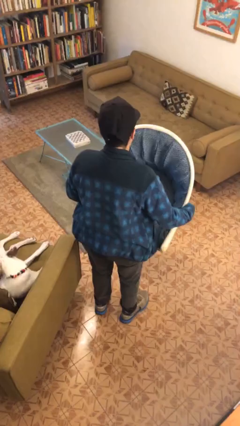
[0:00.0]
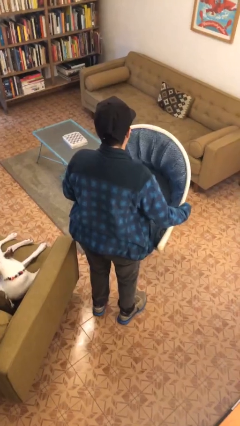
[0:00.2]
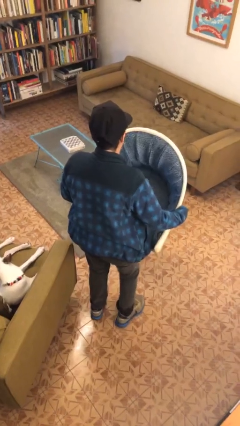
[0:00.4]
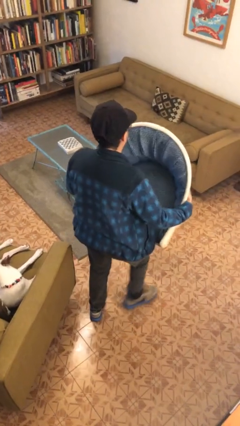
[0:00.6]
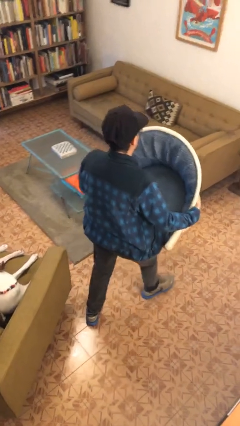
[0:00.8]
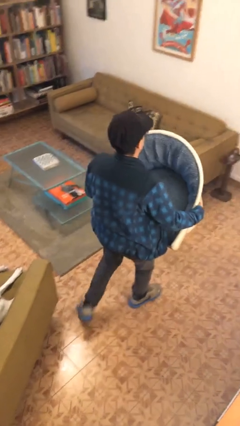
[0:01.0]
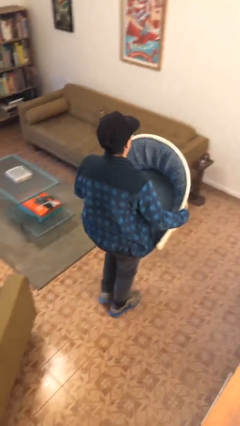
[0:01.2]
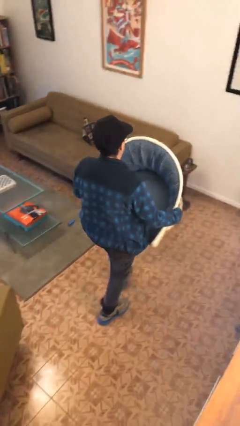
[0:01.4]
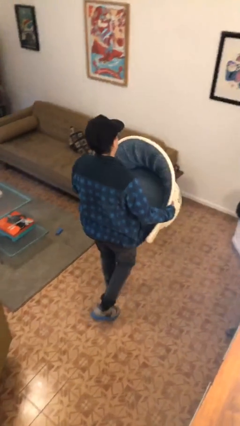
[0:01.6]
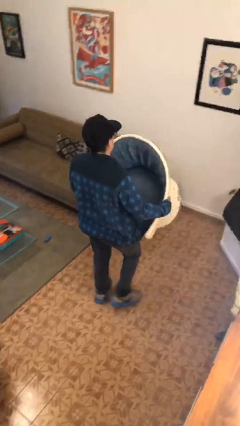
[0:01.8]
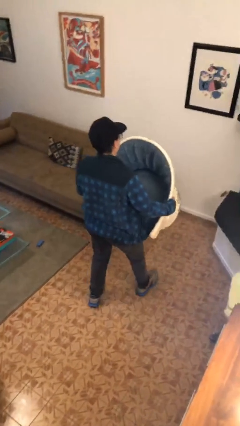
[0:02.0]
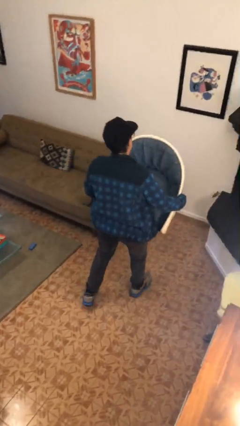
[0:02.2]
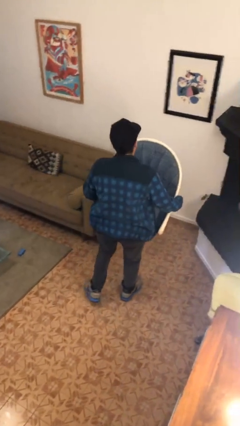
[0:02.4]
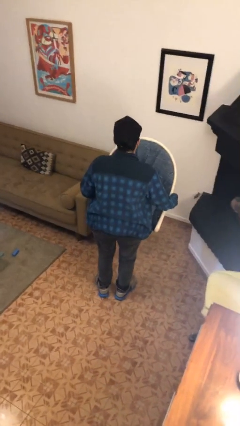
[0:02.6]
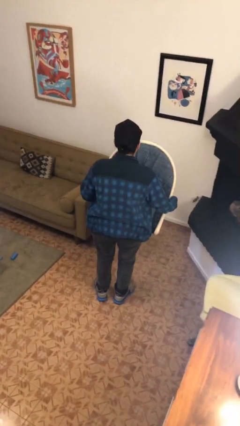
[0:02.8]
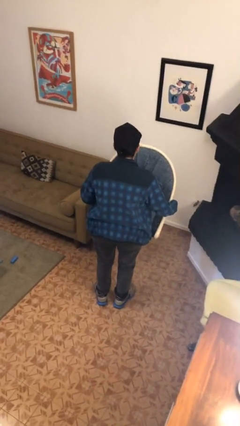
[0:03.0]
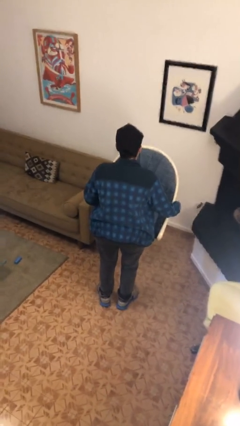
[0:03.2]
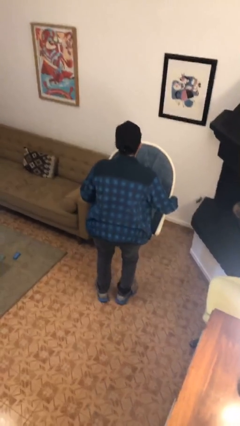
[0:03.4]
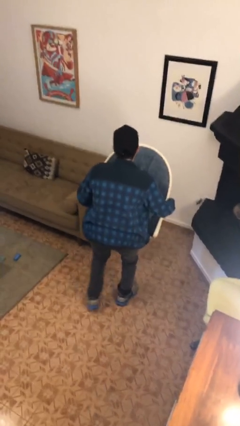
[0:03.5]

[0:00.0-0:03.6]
person carries furniture

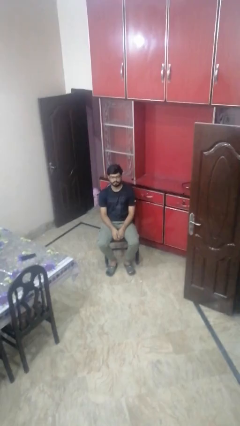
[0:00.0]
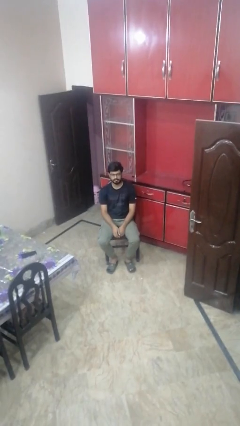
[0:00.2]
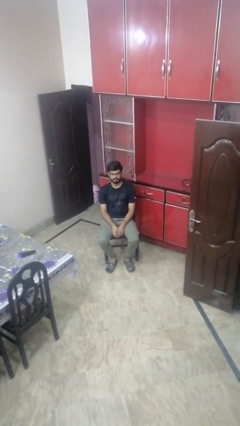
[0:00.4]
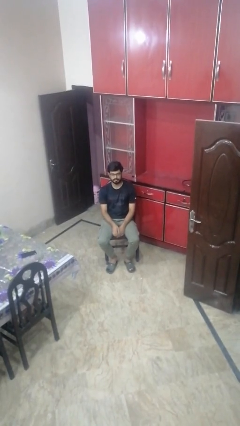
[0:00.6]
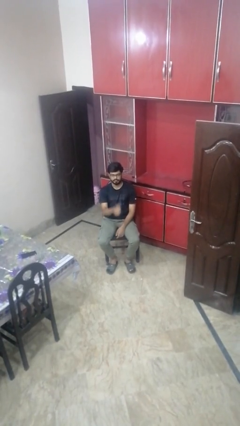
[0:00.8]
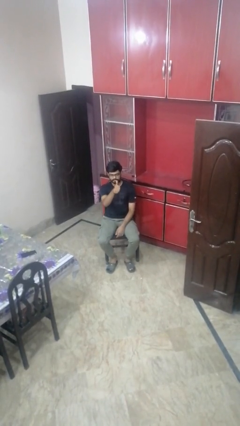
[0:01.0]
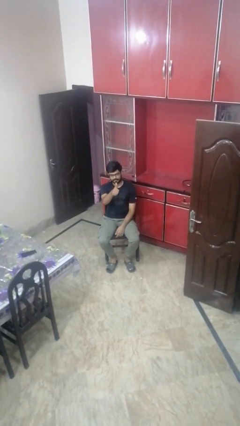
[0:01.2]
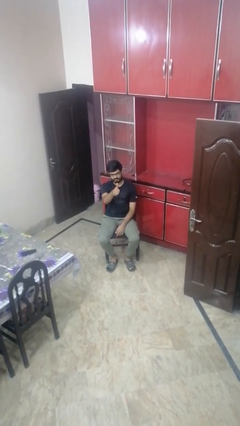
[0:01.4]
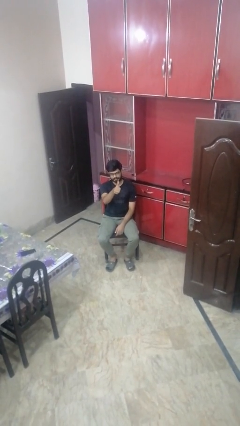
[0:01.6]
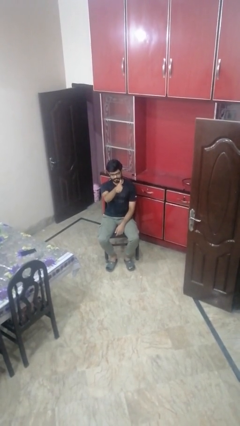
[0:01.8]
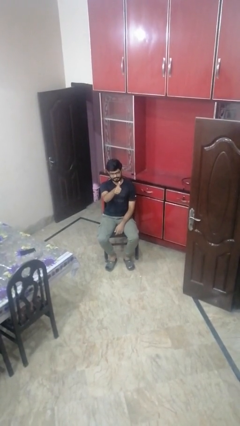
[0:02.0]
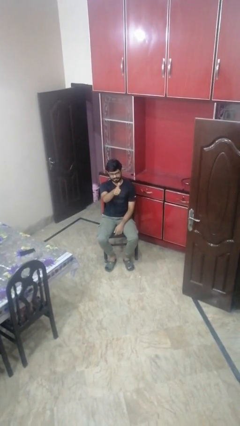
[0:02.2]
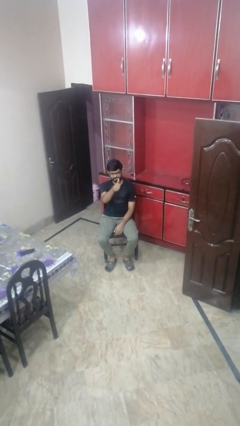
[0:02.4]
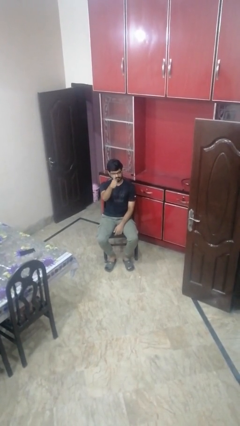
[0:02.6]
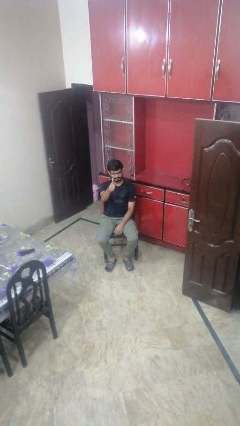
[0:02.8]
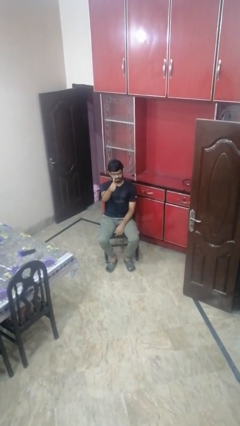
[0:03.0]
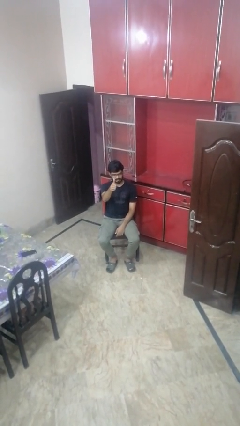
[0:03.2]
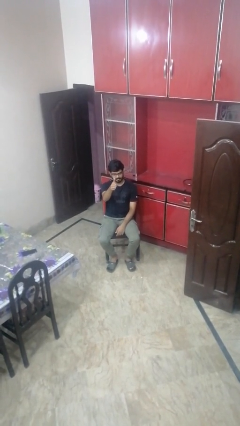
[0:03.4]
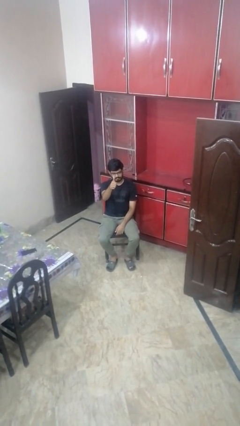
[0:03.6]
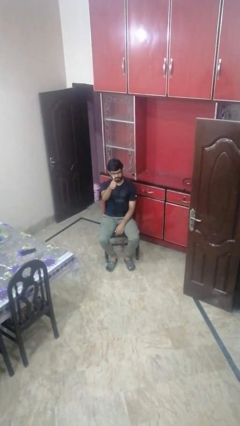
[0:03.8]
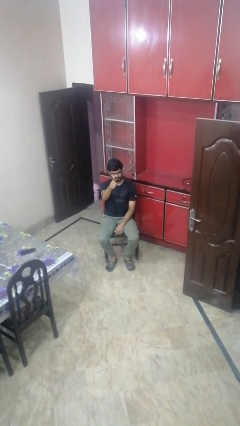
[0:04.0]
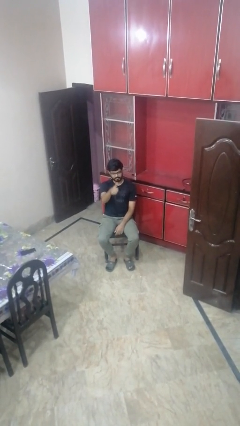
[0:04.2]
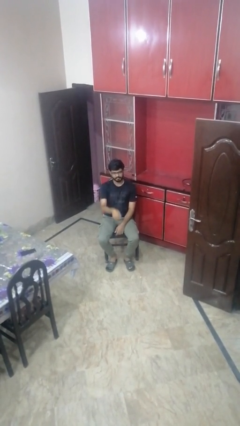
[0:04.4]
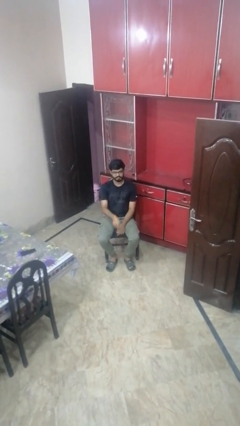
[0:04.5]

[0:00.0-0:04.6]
person gestures thumbs up

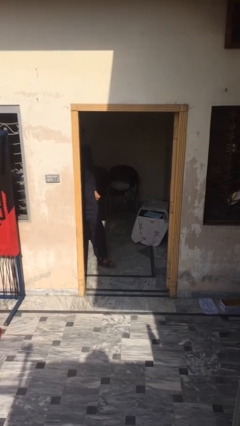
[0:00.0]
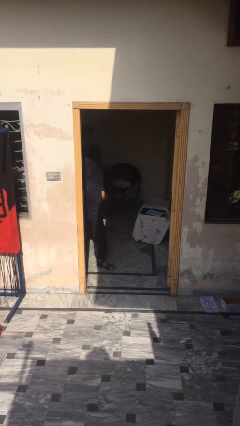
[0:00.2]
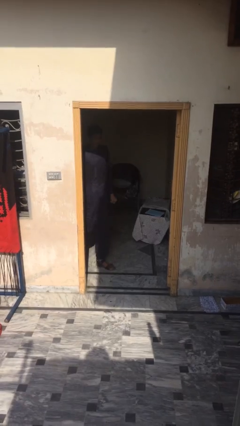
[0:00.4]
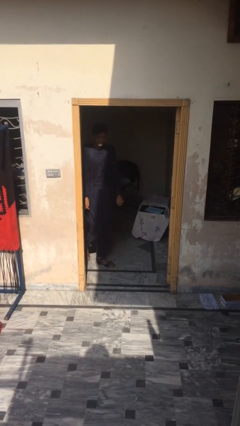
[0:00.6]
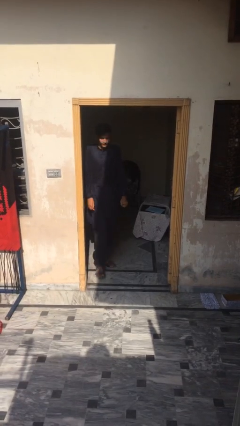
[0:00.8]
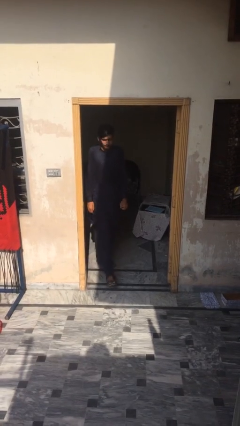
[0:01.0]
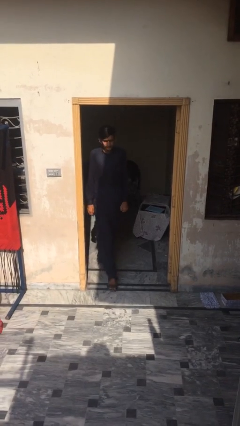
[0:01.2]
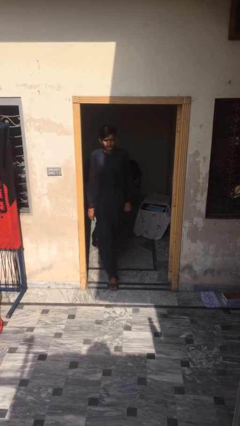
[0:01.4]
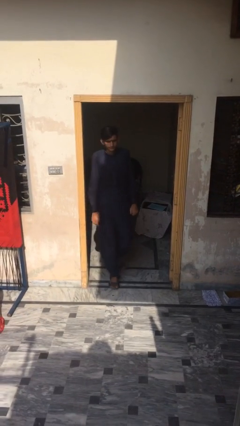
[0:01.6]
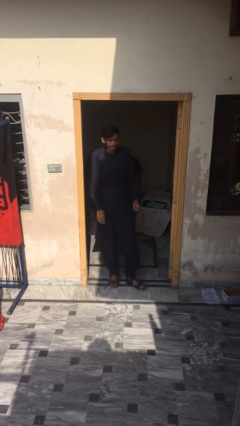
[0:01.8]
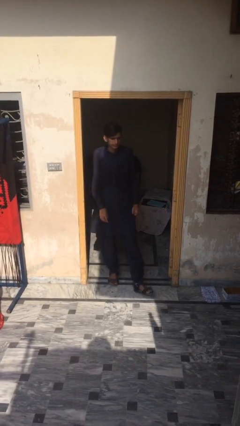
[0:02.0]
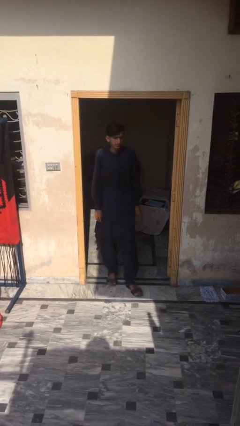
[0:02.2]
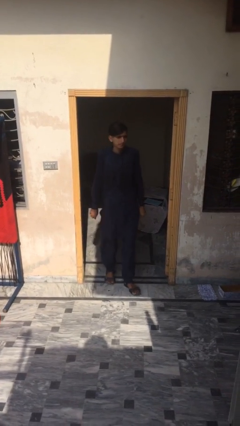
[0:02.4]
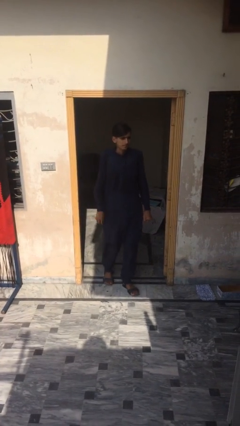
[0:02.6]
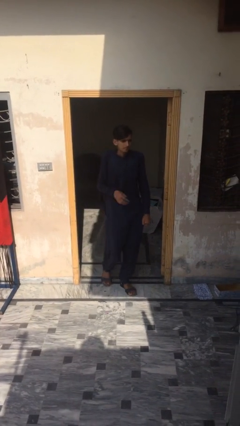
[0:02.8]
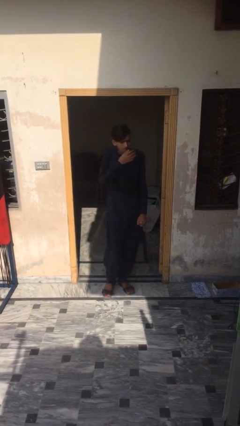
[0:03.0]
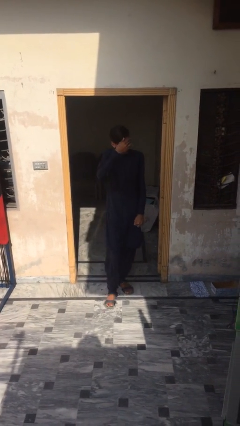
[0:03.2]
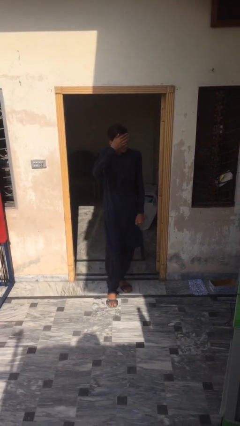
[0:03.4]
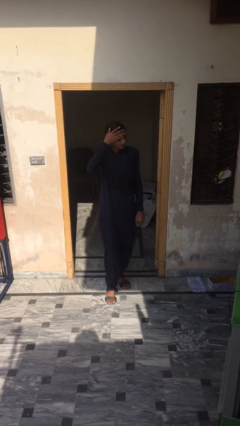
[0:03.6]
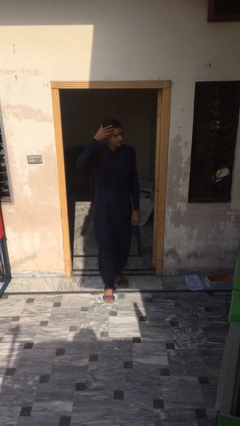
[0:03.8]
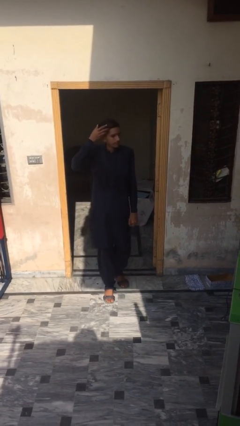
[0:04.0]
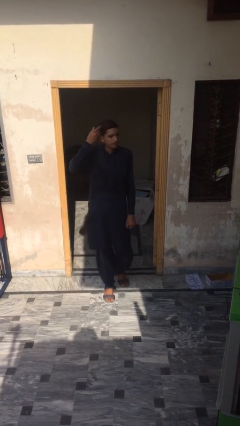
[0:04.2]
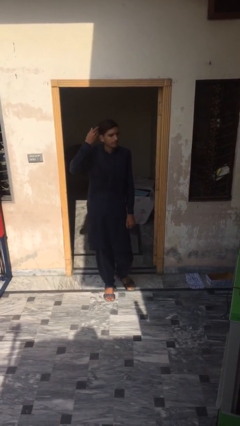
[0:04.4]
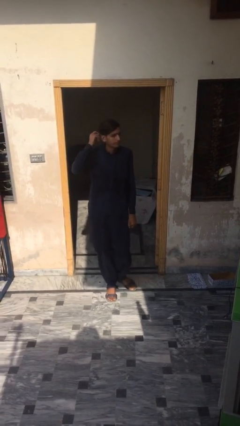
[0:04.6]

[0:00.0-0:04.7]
person enters scene through structure

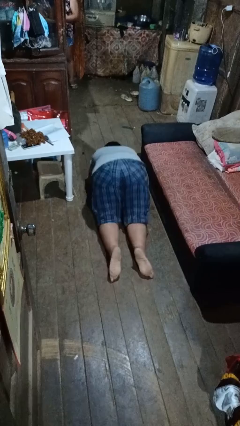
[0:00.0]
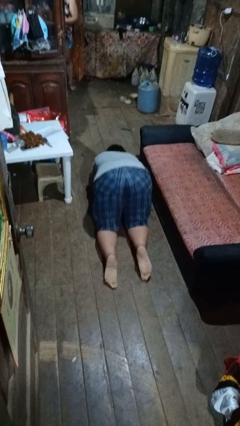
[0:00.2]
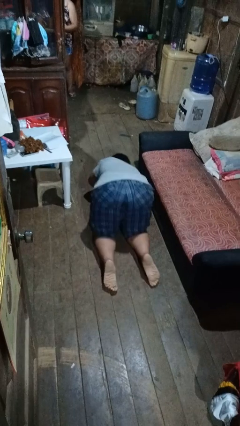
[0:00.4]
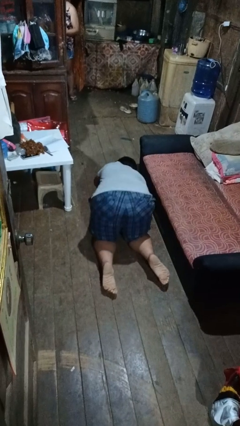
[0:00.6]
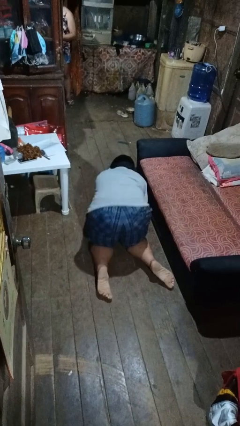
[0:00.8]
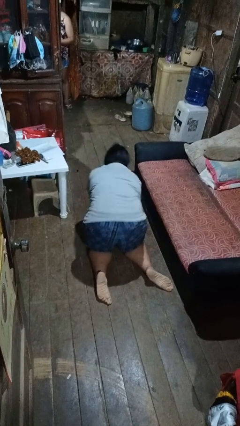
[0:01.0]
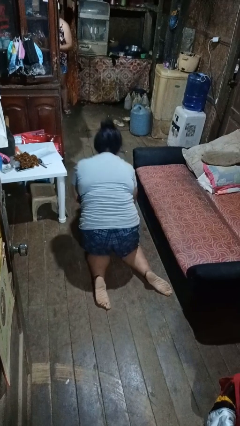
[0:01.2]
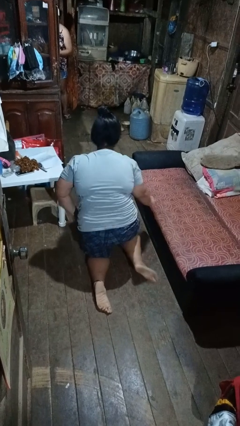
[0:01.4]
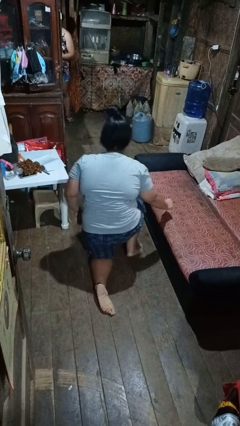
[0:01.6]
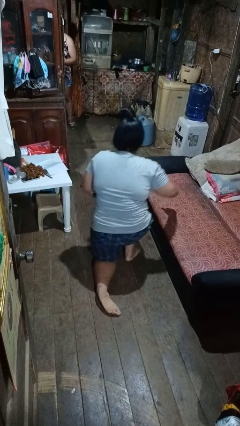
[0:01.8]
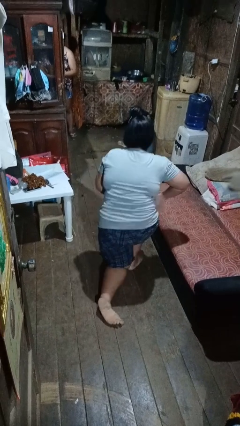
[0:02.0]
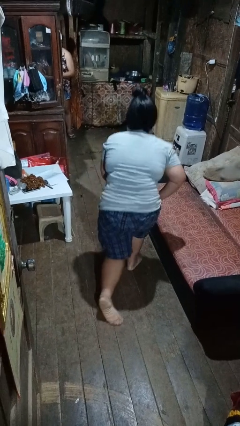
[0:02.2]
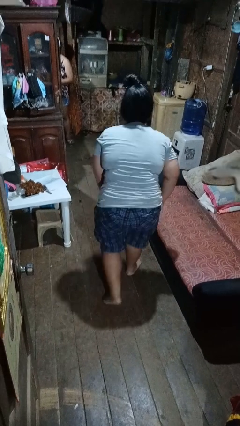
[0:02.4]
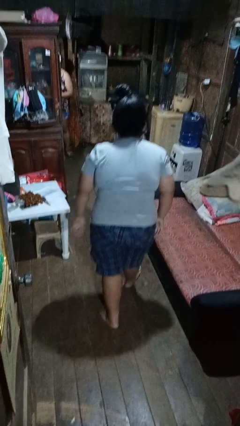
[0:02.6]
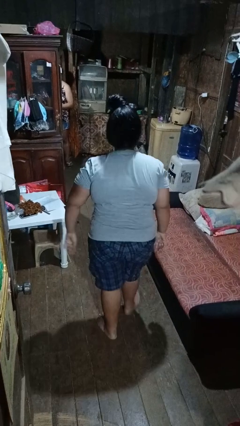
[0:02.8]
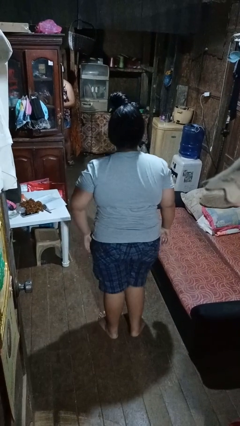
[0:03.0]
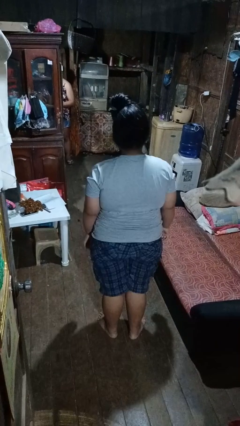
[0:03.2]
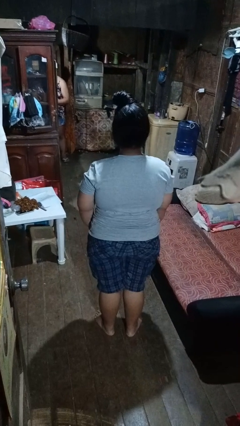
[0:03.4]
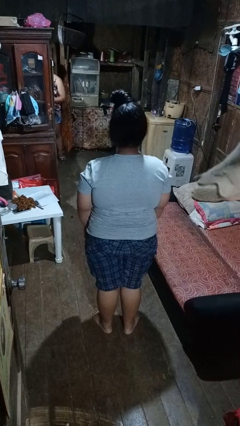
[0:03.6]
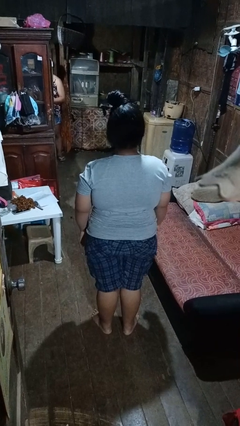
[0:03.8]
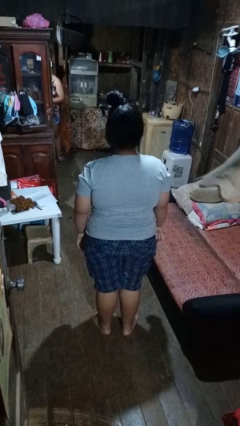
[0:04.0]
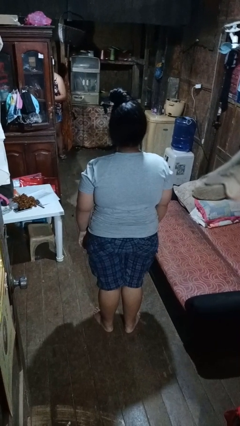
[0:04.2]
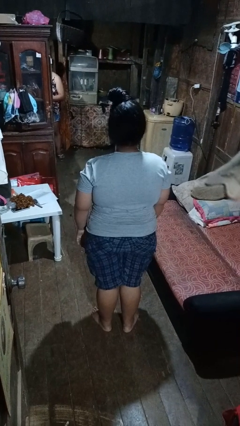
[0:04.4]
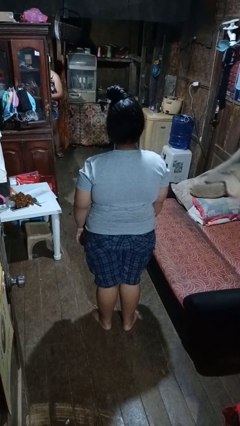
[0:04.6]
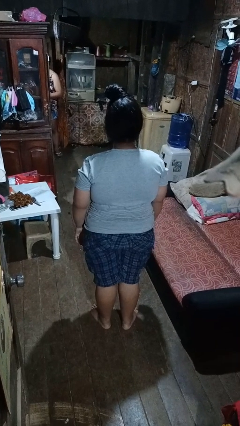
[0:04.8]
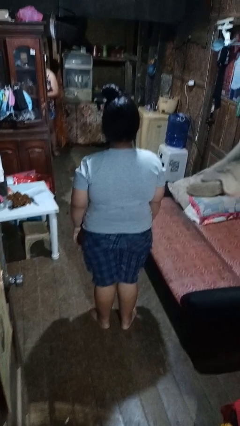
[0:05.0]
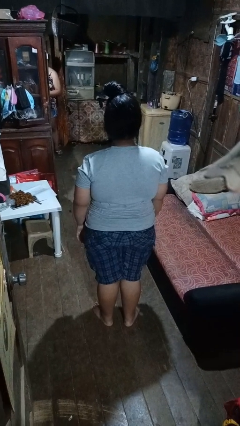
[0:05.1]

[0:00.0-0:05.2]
person stands up from floor
